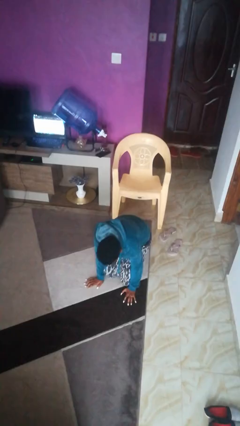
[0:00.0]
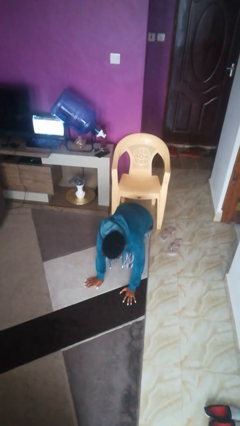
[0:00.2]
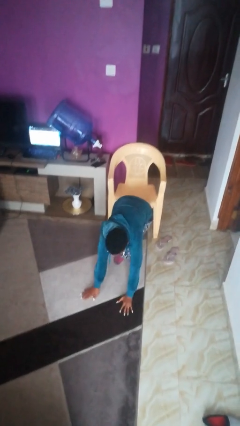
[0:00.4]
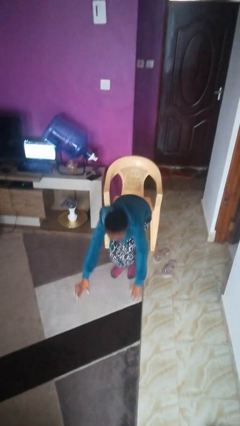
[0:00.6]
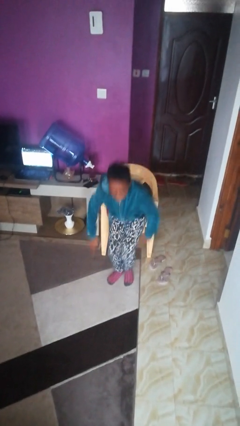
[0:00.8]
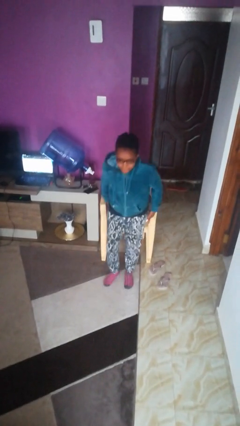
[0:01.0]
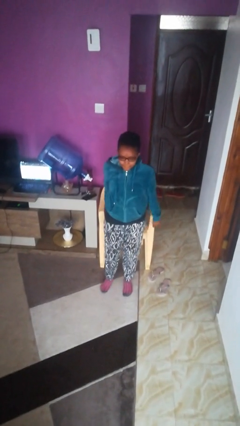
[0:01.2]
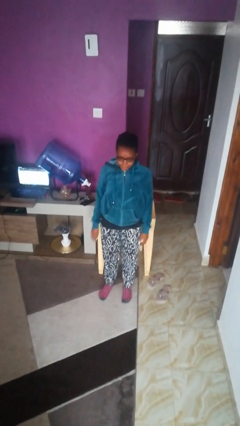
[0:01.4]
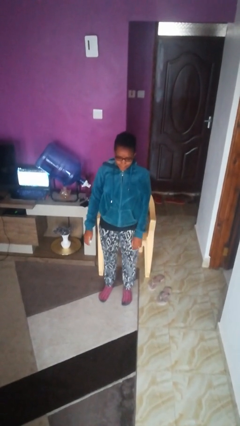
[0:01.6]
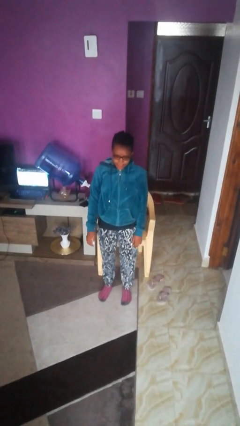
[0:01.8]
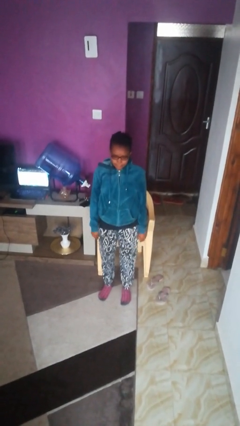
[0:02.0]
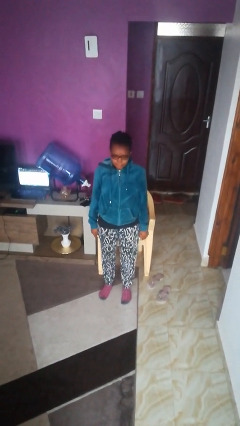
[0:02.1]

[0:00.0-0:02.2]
person stands up from floor

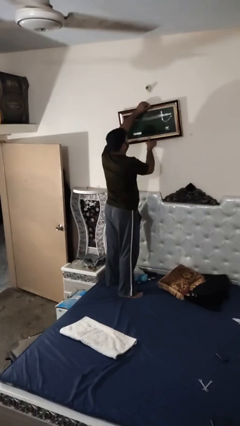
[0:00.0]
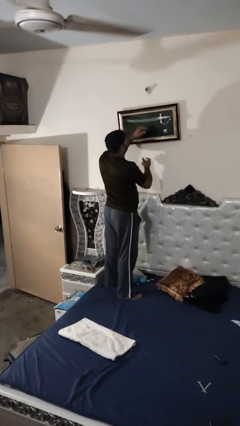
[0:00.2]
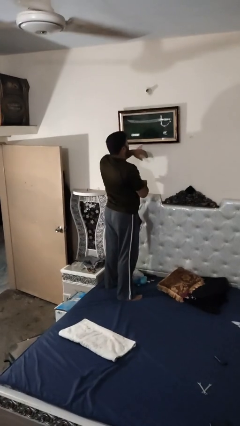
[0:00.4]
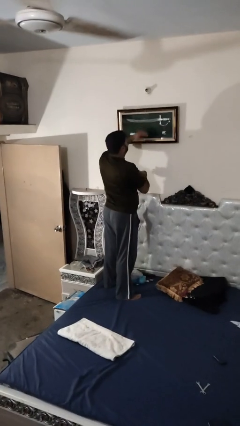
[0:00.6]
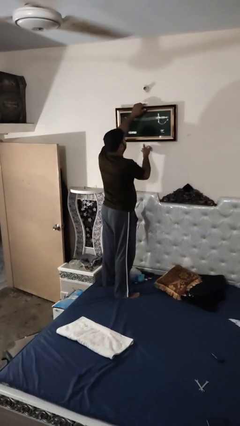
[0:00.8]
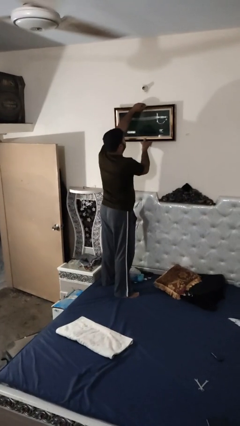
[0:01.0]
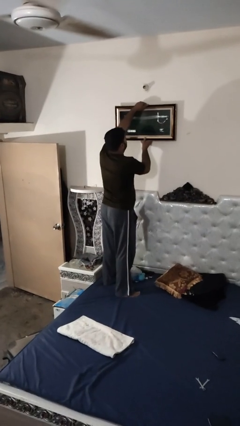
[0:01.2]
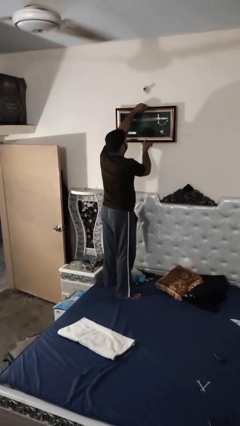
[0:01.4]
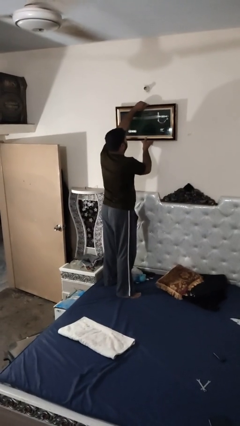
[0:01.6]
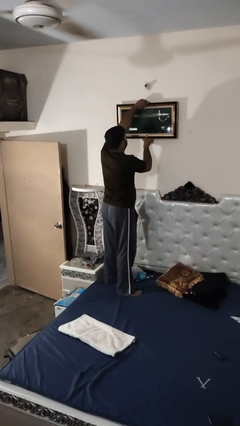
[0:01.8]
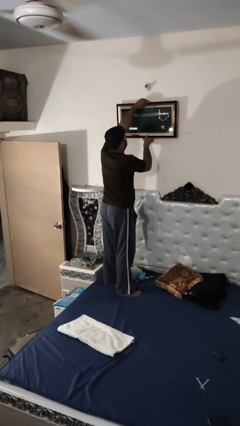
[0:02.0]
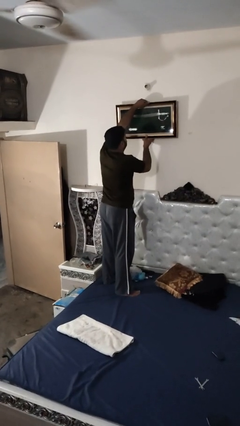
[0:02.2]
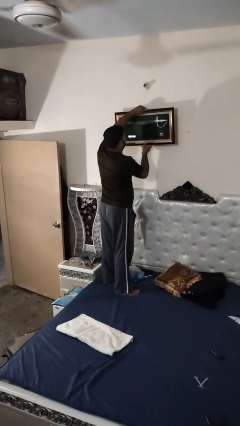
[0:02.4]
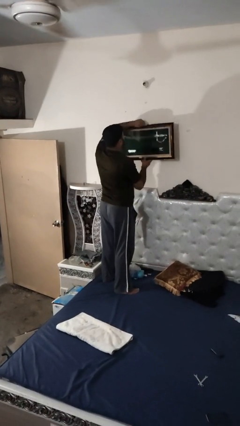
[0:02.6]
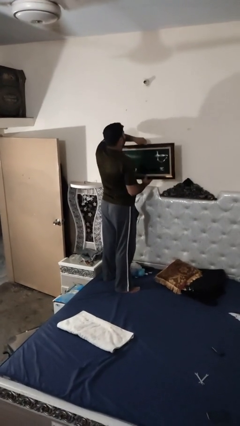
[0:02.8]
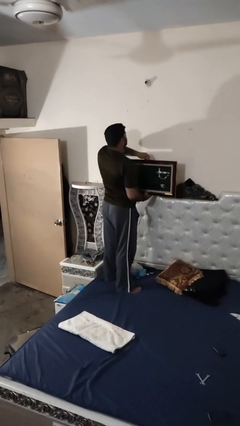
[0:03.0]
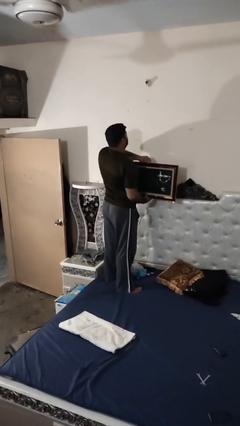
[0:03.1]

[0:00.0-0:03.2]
person takes down picture frame

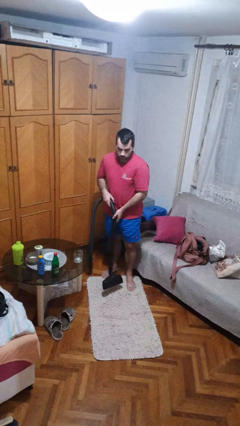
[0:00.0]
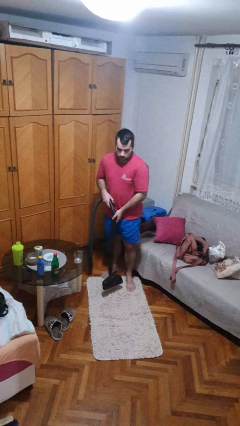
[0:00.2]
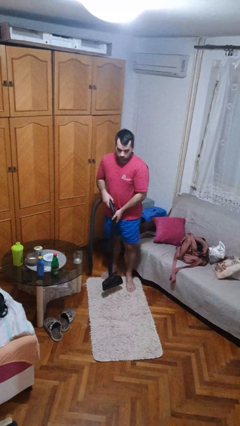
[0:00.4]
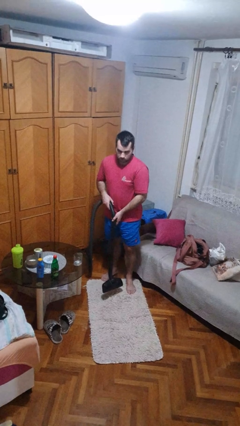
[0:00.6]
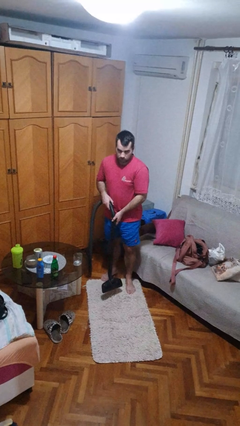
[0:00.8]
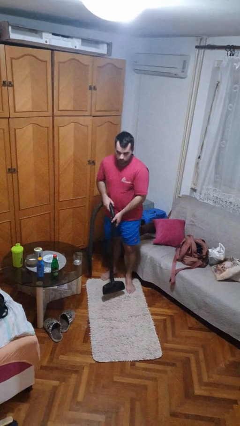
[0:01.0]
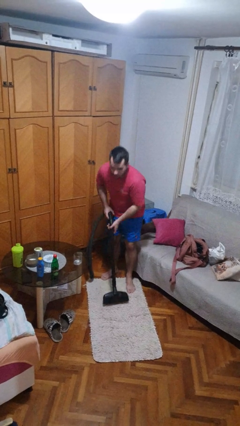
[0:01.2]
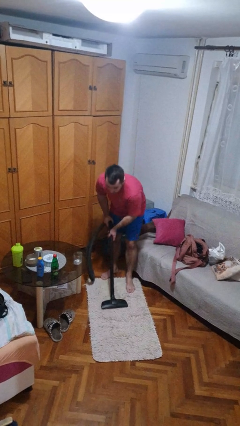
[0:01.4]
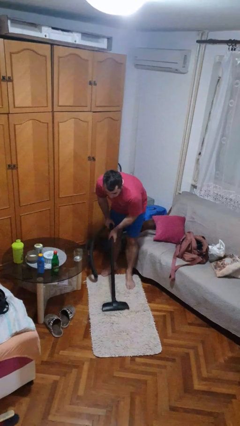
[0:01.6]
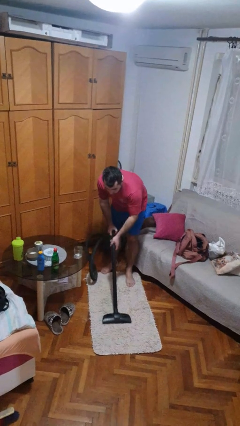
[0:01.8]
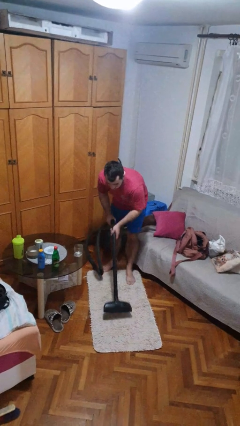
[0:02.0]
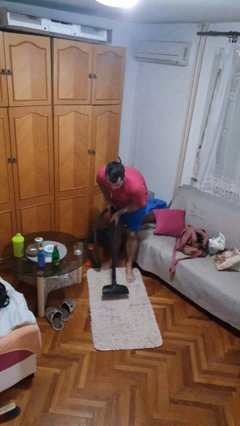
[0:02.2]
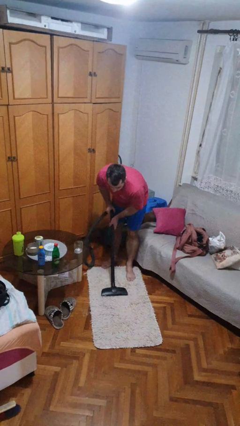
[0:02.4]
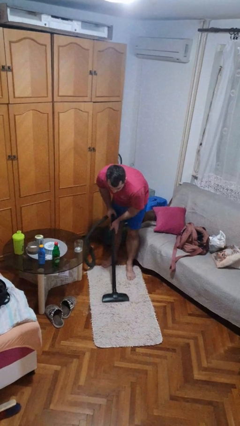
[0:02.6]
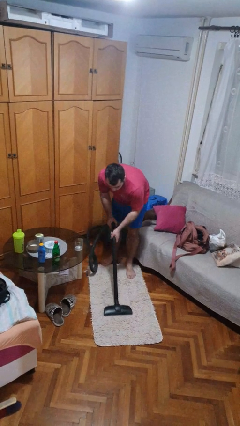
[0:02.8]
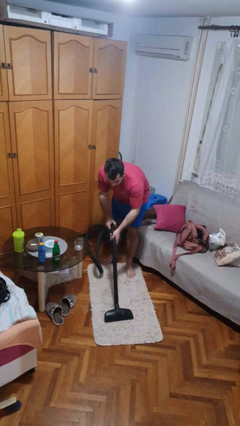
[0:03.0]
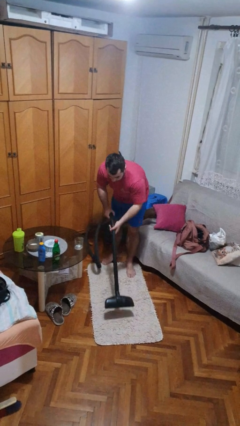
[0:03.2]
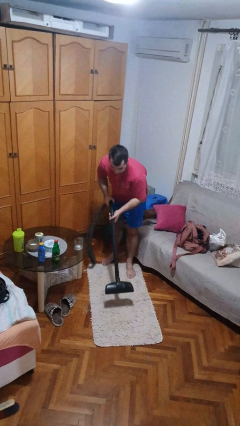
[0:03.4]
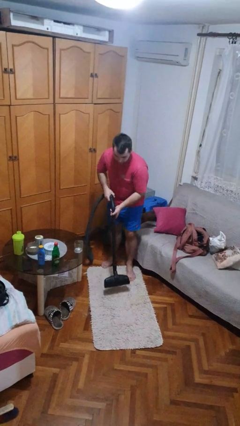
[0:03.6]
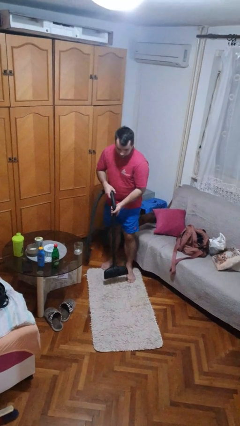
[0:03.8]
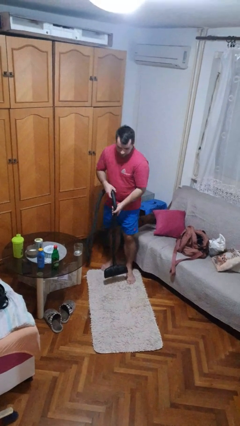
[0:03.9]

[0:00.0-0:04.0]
person vacuums carpet

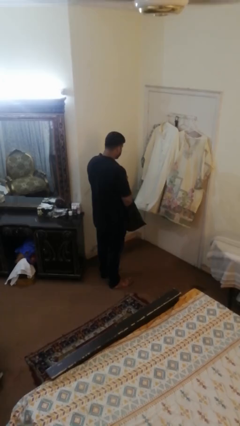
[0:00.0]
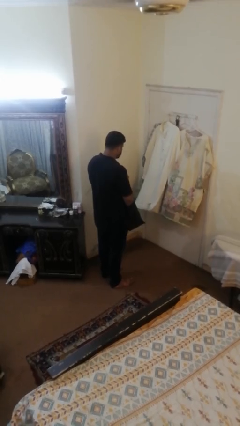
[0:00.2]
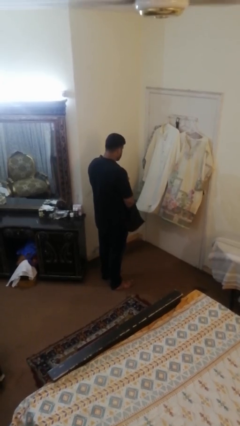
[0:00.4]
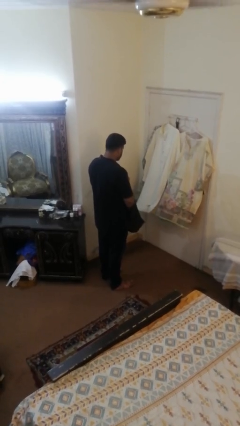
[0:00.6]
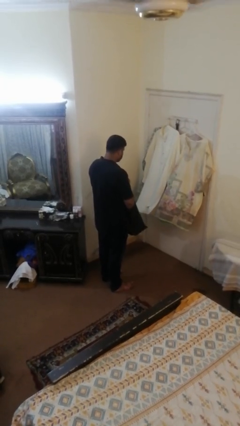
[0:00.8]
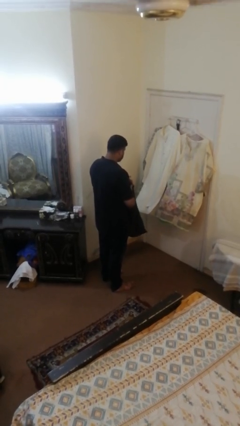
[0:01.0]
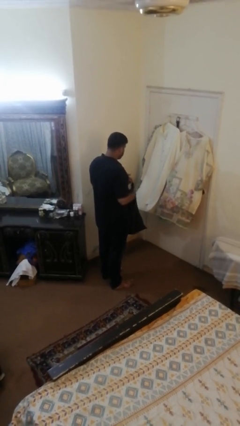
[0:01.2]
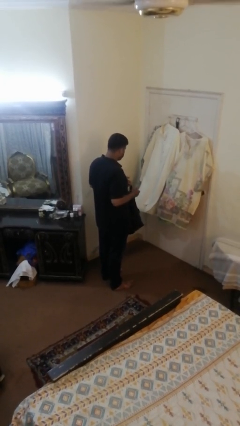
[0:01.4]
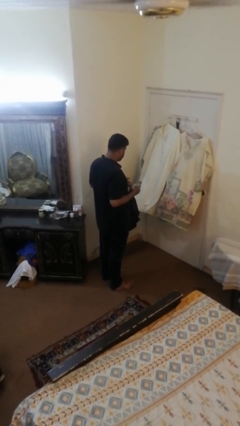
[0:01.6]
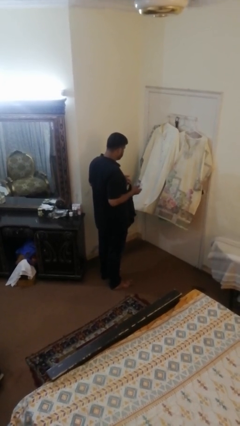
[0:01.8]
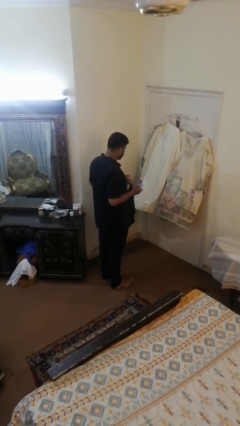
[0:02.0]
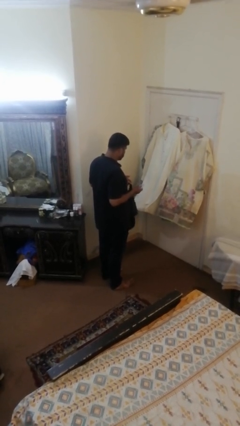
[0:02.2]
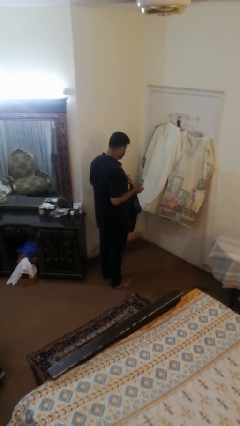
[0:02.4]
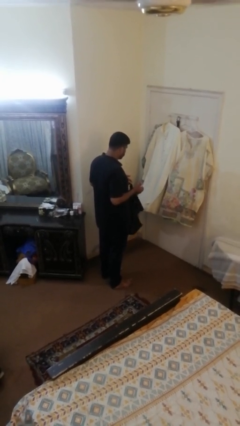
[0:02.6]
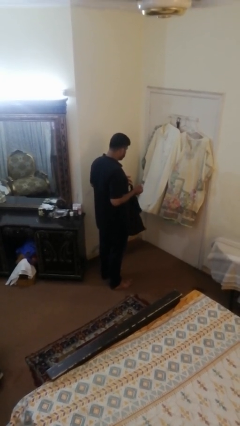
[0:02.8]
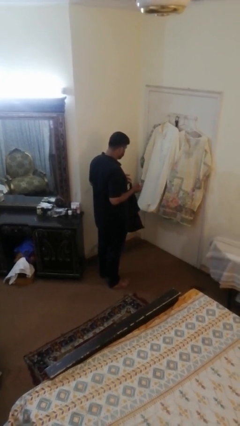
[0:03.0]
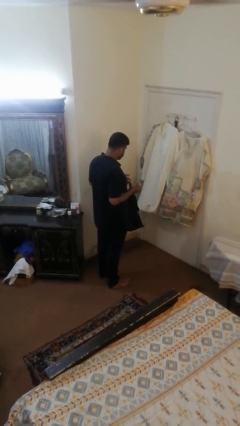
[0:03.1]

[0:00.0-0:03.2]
person takes object from bag

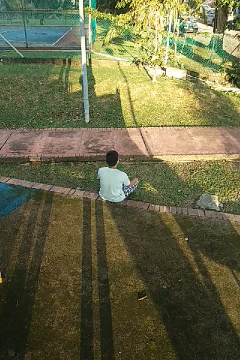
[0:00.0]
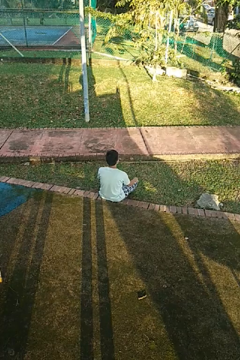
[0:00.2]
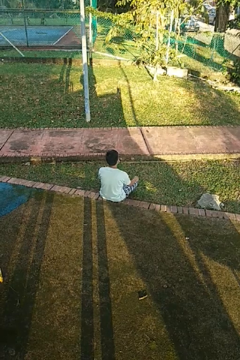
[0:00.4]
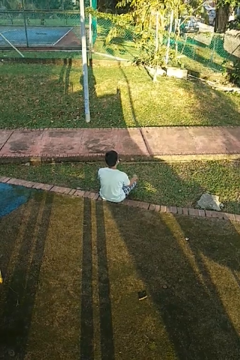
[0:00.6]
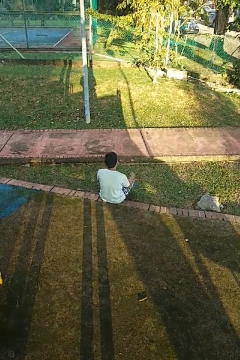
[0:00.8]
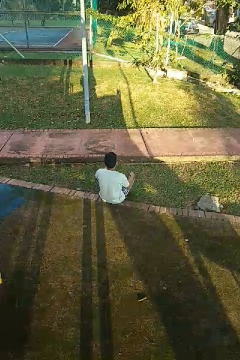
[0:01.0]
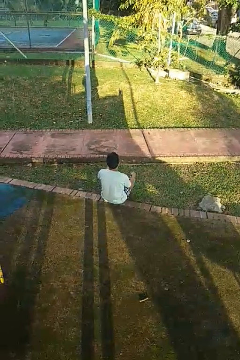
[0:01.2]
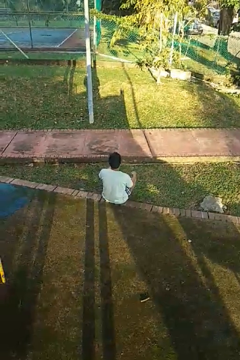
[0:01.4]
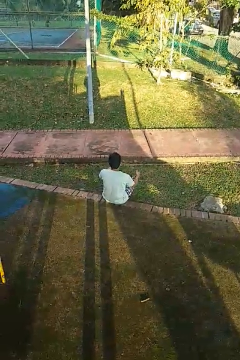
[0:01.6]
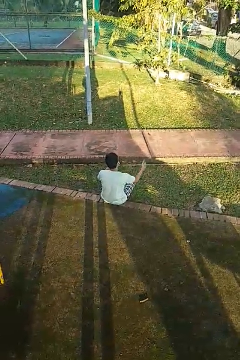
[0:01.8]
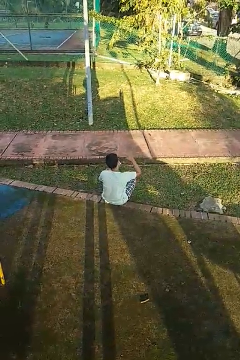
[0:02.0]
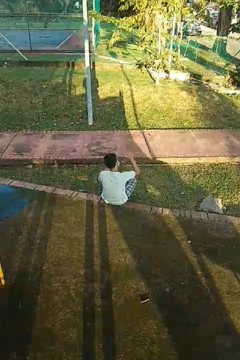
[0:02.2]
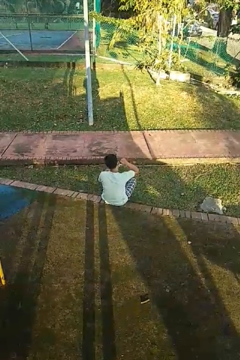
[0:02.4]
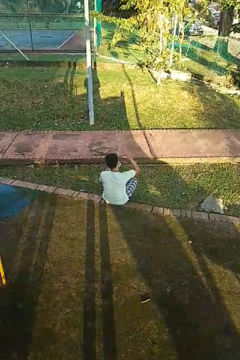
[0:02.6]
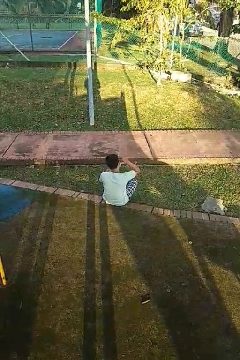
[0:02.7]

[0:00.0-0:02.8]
person gestures behind me

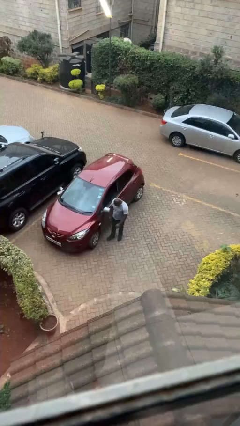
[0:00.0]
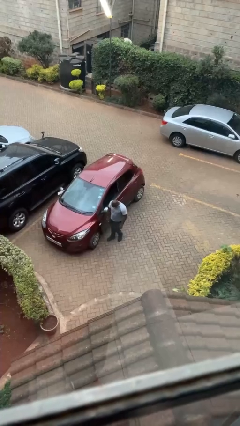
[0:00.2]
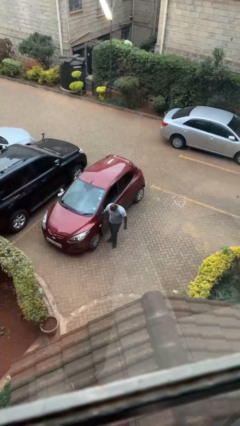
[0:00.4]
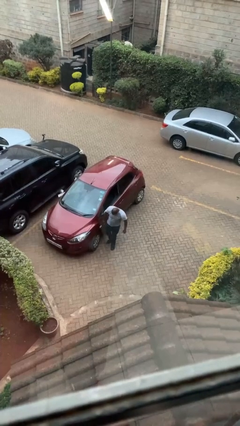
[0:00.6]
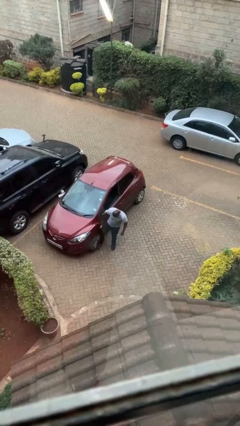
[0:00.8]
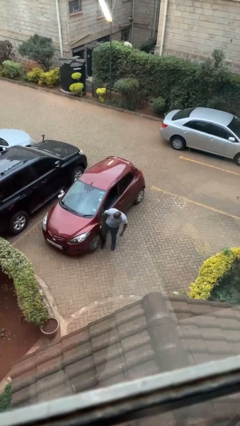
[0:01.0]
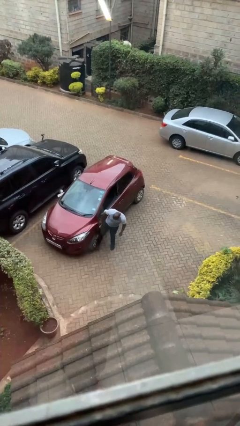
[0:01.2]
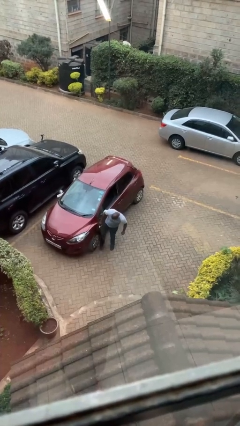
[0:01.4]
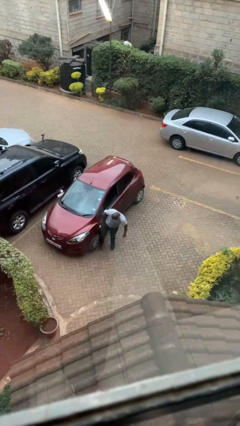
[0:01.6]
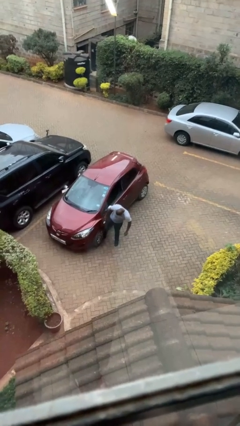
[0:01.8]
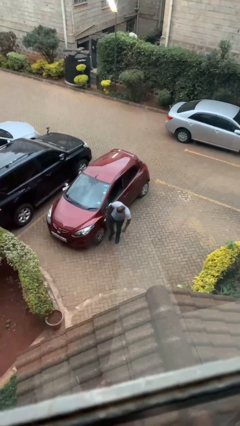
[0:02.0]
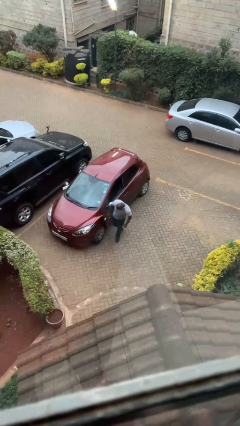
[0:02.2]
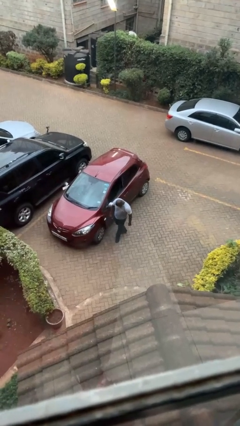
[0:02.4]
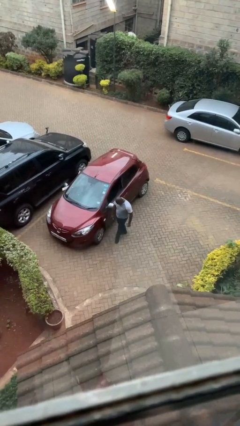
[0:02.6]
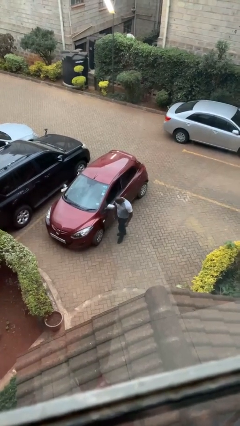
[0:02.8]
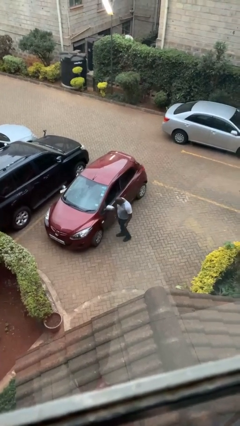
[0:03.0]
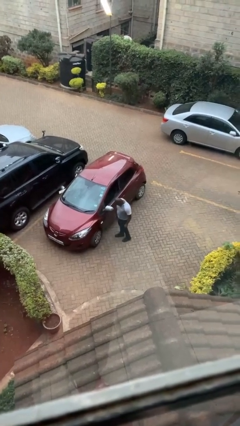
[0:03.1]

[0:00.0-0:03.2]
person kicks car tires
